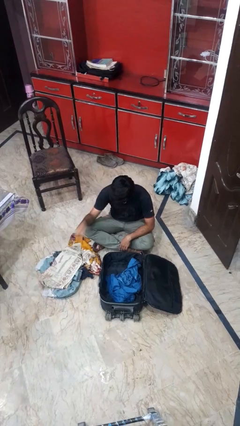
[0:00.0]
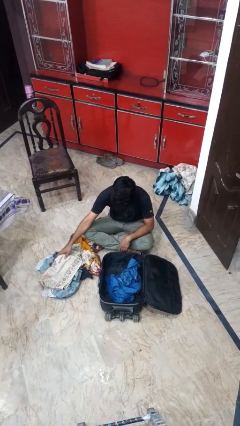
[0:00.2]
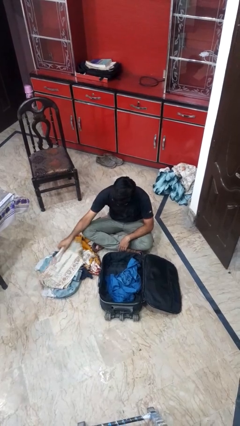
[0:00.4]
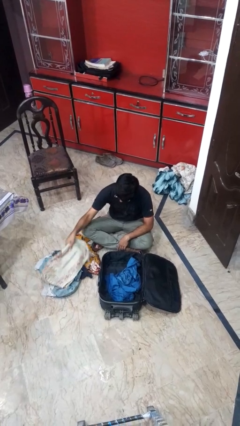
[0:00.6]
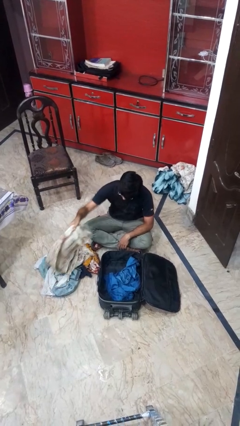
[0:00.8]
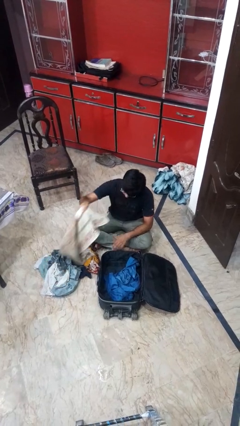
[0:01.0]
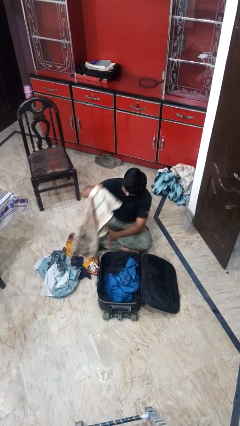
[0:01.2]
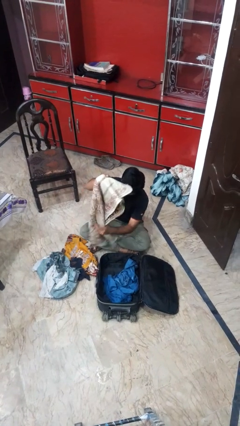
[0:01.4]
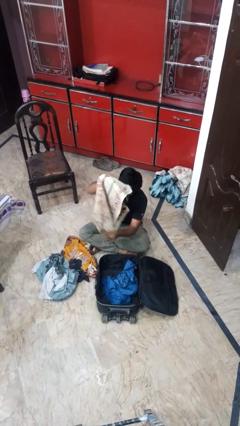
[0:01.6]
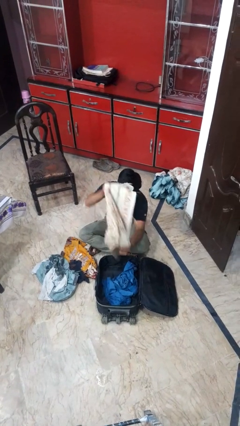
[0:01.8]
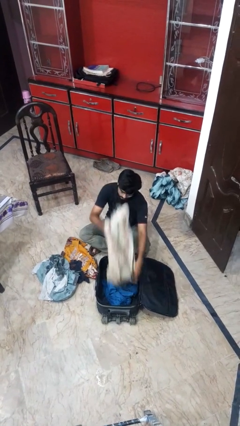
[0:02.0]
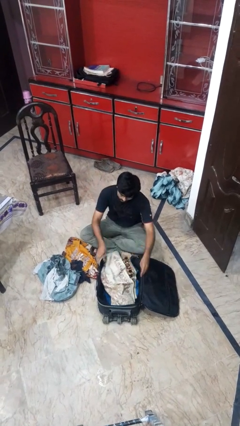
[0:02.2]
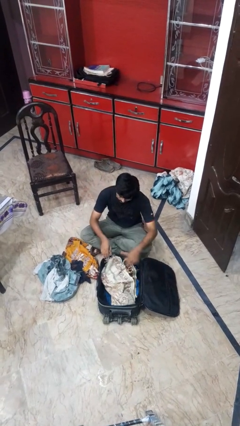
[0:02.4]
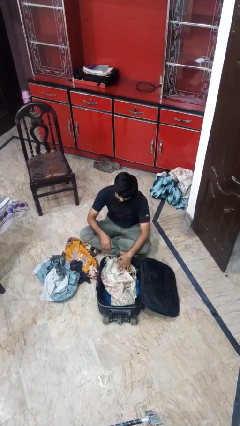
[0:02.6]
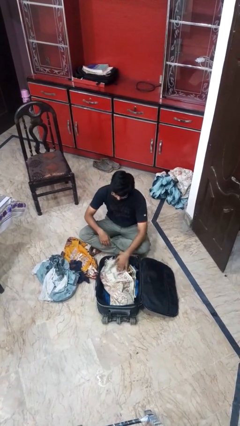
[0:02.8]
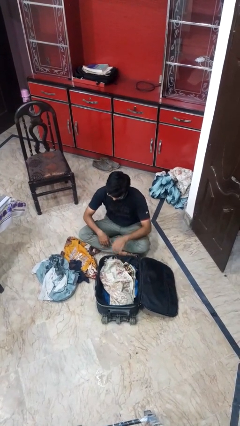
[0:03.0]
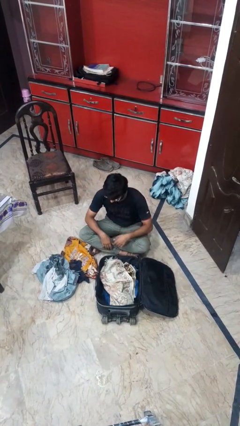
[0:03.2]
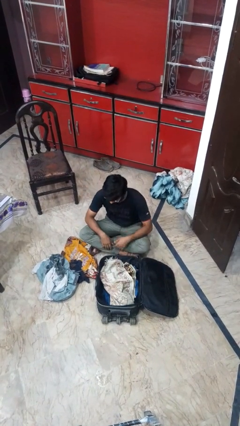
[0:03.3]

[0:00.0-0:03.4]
person loads clothes into suitcase

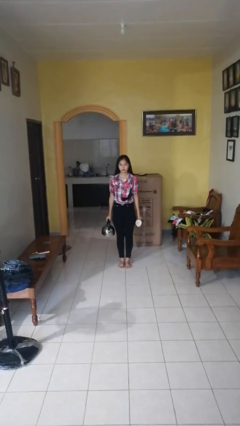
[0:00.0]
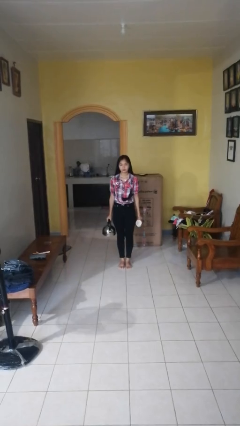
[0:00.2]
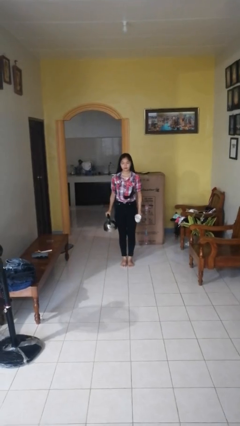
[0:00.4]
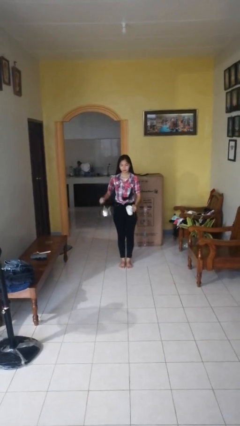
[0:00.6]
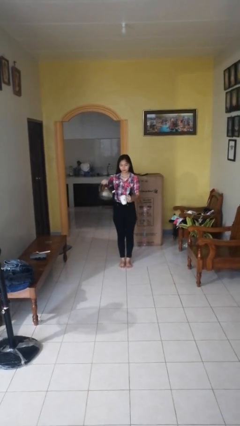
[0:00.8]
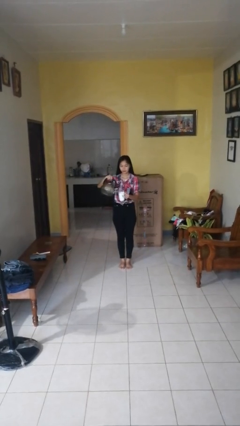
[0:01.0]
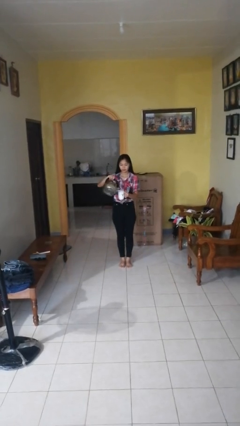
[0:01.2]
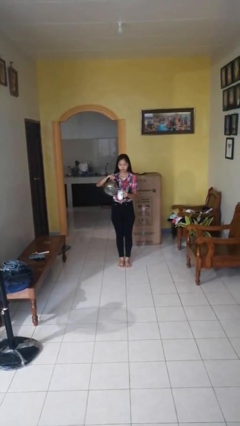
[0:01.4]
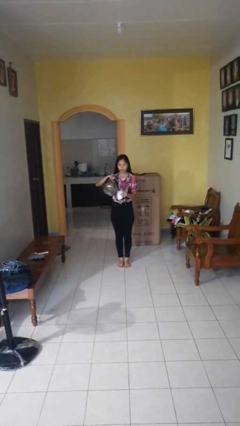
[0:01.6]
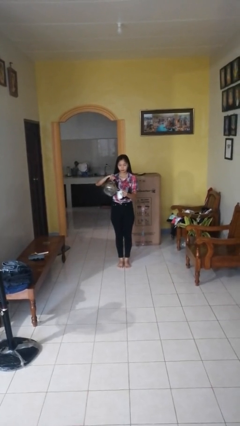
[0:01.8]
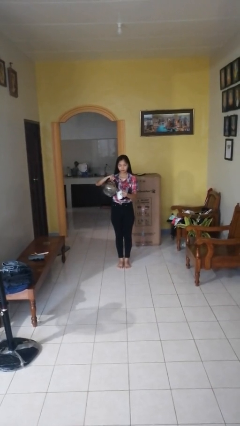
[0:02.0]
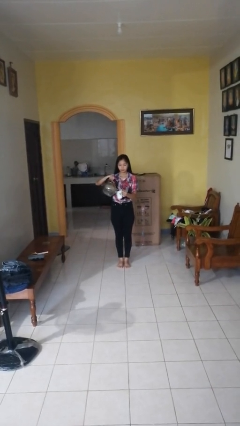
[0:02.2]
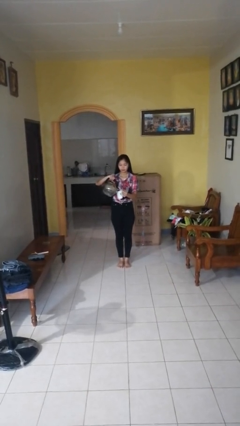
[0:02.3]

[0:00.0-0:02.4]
person pours coffee into mug

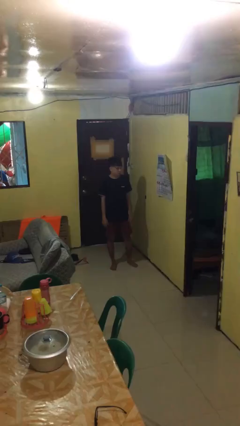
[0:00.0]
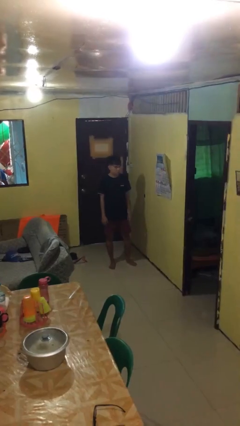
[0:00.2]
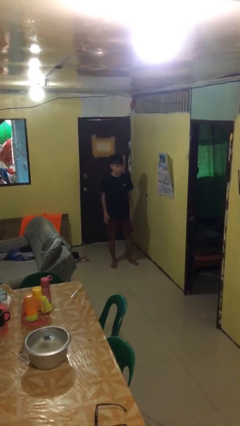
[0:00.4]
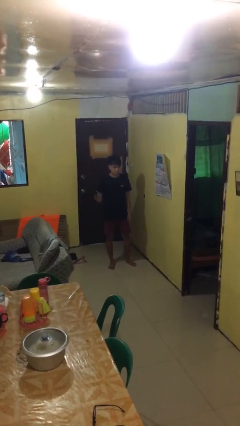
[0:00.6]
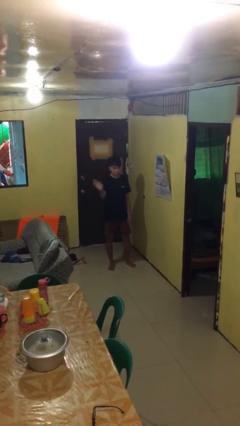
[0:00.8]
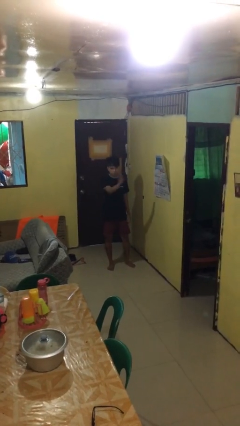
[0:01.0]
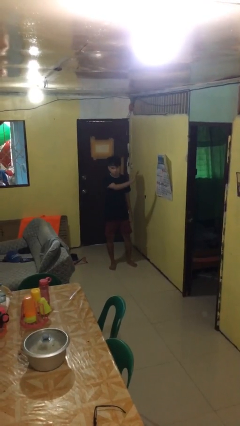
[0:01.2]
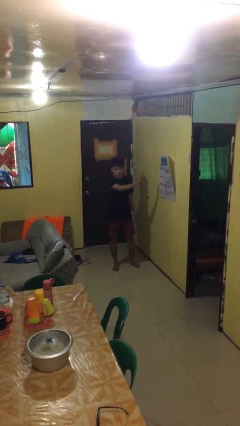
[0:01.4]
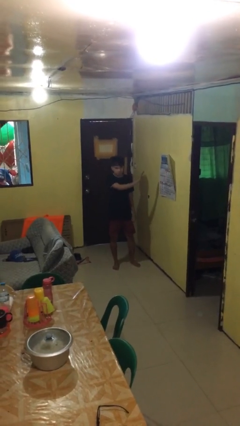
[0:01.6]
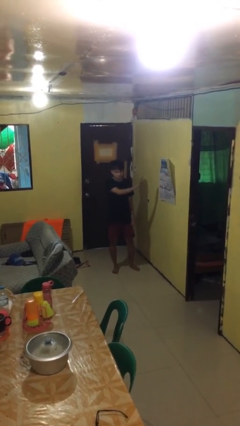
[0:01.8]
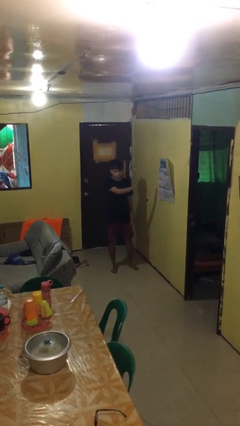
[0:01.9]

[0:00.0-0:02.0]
person gestures swipe left

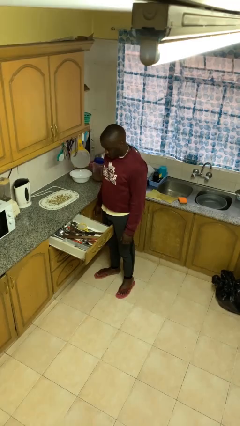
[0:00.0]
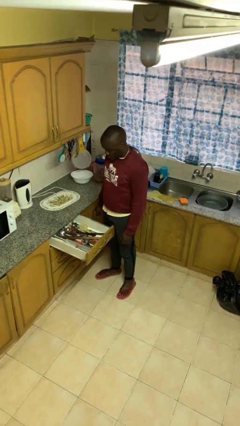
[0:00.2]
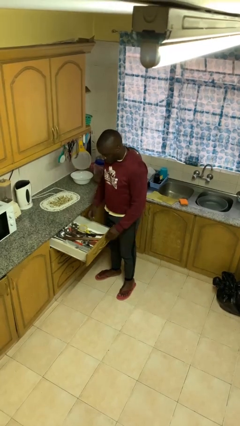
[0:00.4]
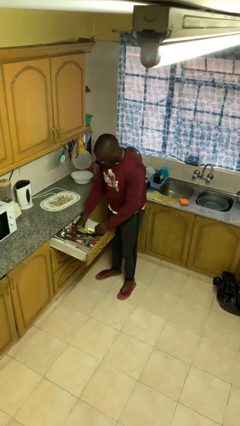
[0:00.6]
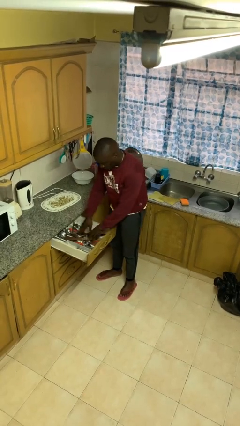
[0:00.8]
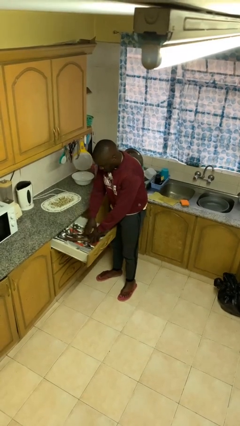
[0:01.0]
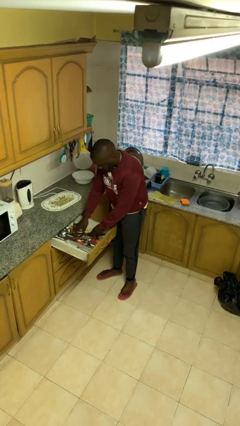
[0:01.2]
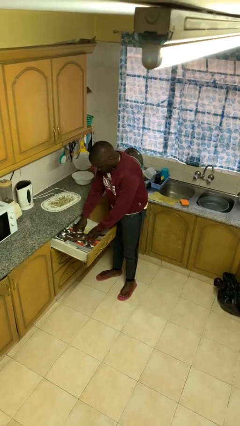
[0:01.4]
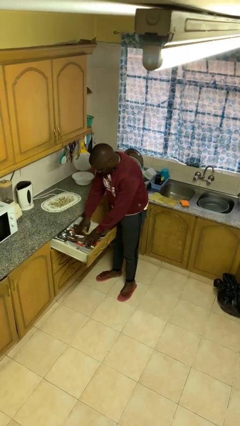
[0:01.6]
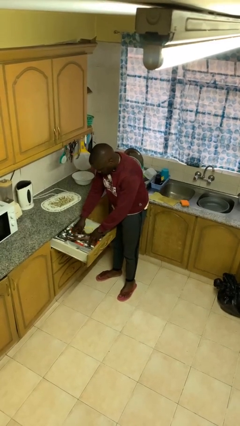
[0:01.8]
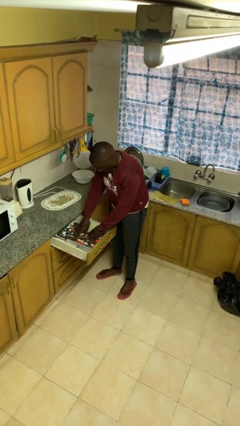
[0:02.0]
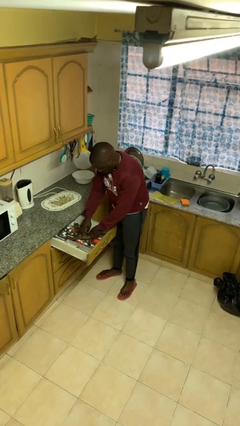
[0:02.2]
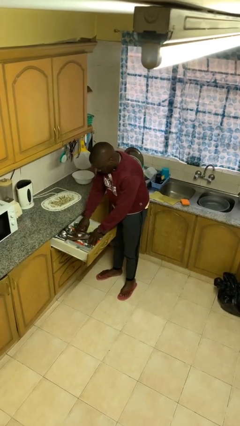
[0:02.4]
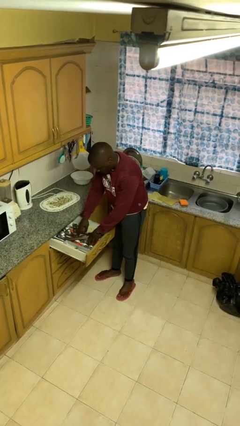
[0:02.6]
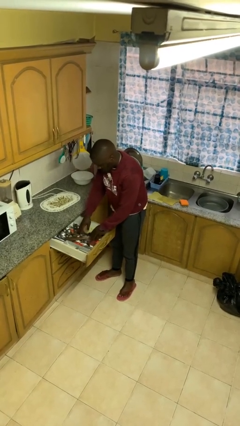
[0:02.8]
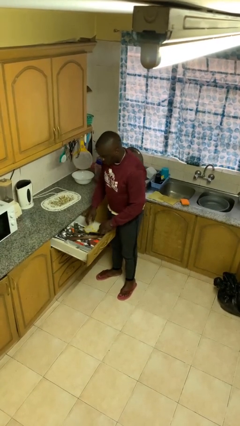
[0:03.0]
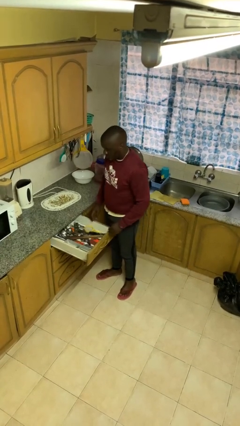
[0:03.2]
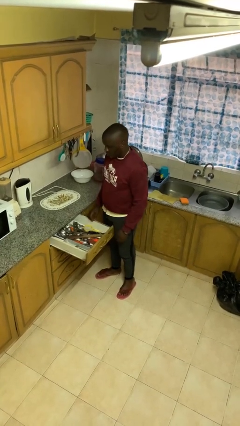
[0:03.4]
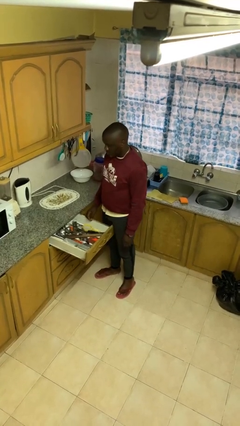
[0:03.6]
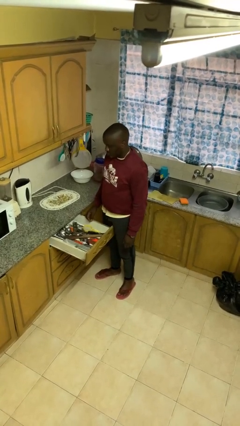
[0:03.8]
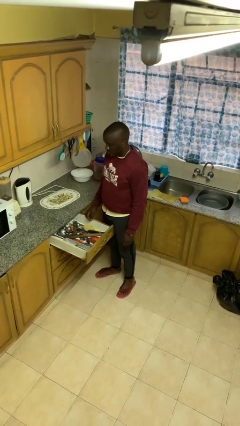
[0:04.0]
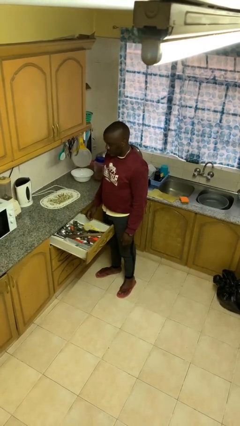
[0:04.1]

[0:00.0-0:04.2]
person searches in kitchen drawer

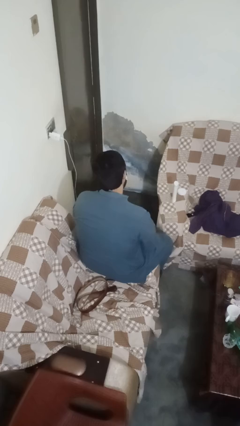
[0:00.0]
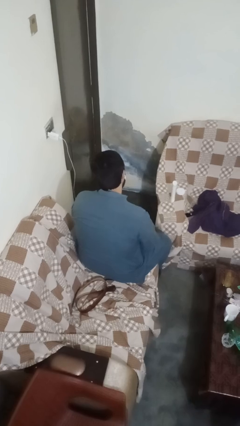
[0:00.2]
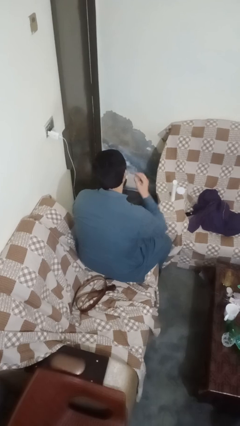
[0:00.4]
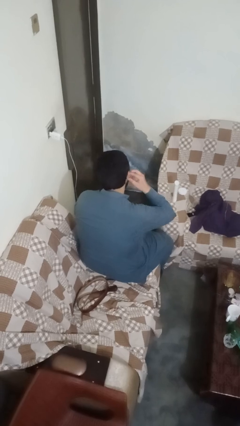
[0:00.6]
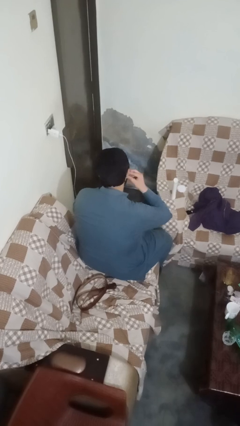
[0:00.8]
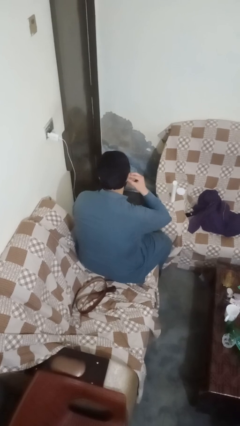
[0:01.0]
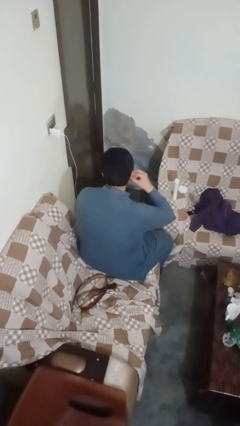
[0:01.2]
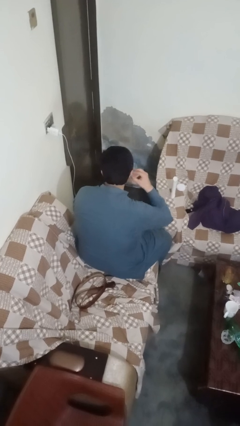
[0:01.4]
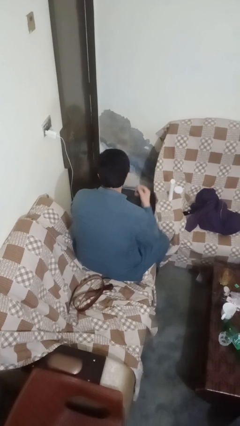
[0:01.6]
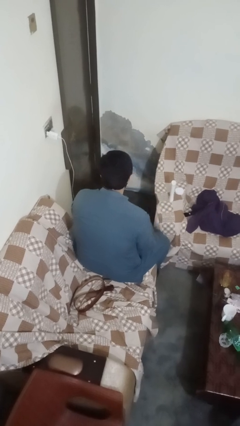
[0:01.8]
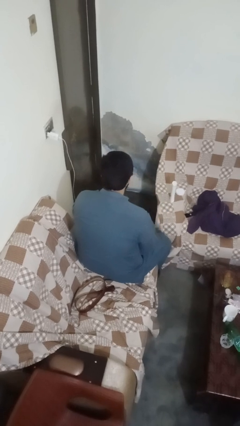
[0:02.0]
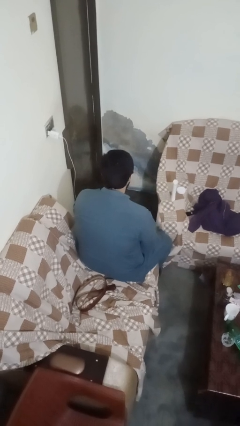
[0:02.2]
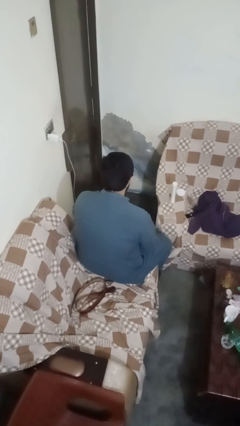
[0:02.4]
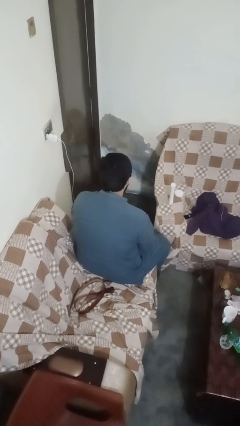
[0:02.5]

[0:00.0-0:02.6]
person takes off earrings

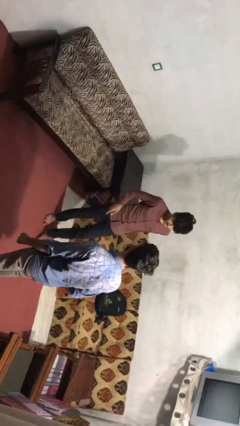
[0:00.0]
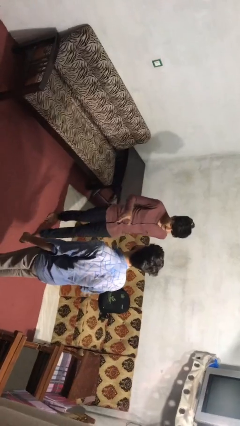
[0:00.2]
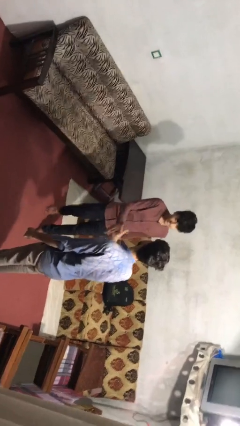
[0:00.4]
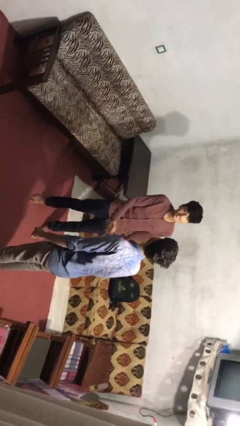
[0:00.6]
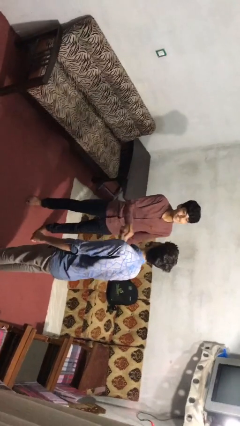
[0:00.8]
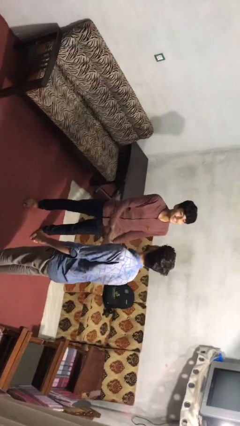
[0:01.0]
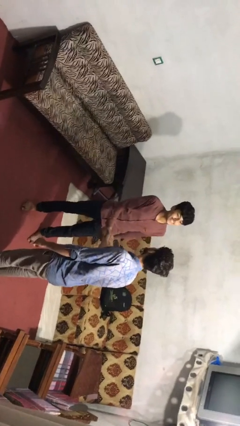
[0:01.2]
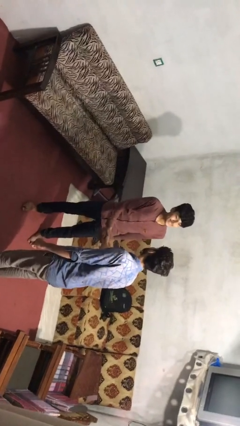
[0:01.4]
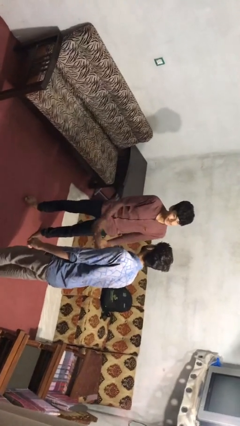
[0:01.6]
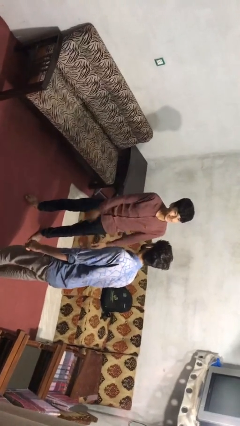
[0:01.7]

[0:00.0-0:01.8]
person shakes hand

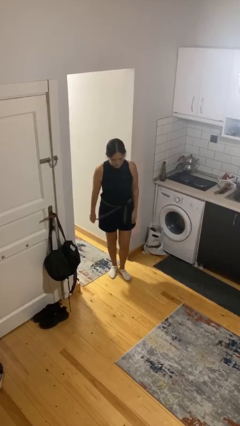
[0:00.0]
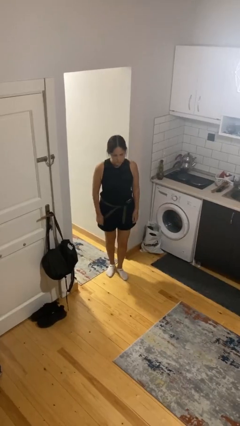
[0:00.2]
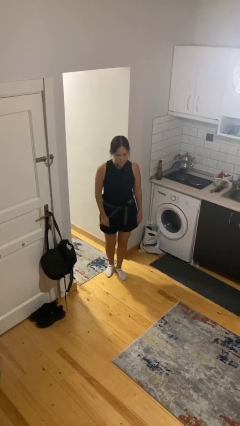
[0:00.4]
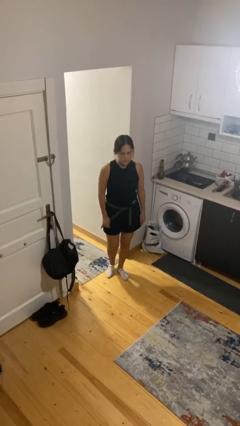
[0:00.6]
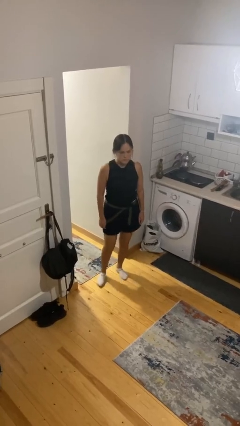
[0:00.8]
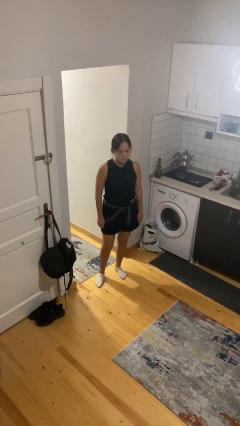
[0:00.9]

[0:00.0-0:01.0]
person takes off belt
